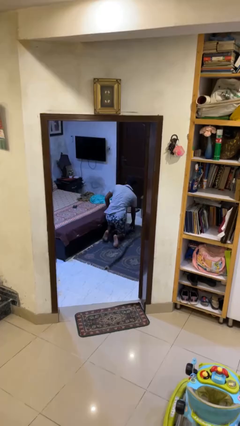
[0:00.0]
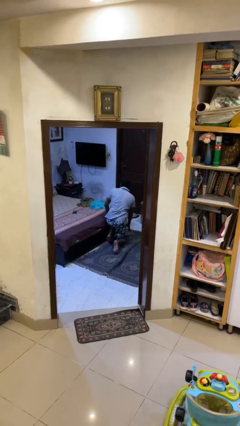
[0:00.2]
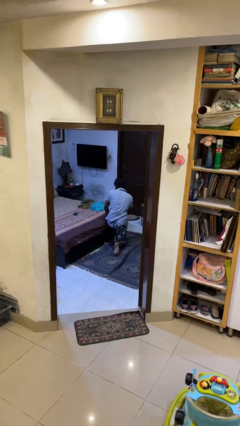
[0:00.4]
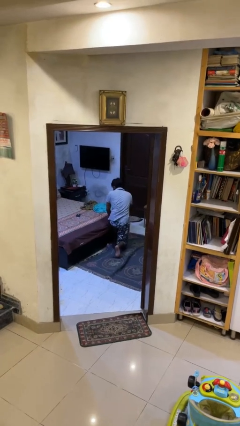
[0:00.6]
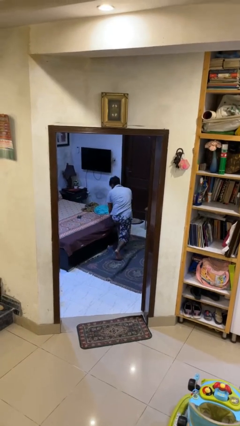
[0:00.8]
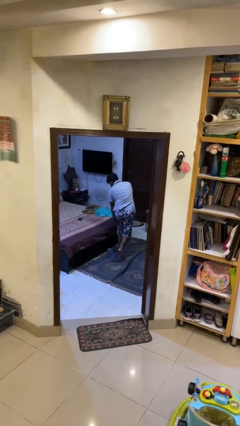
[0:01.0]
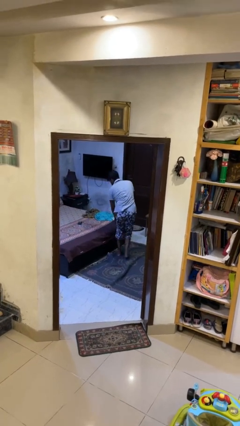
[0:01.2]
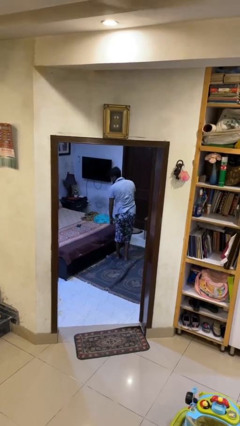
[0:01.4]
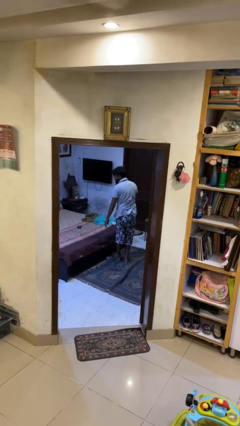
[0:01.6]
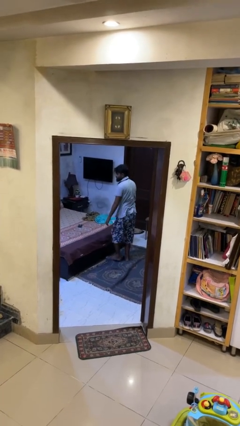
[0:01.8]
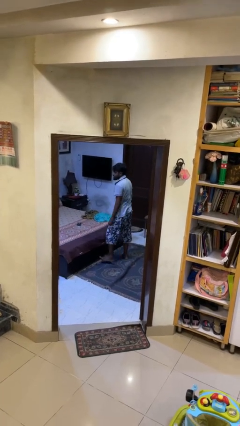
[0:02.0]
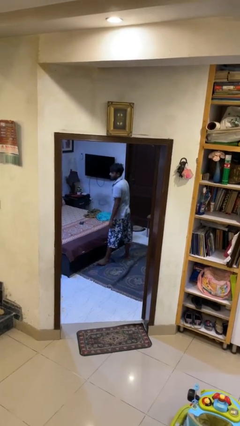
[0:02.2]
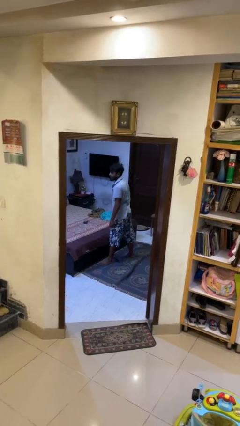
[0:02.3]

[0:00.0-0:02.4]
person stands up from floor

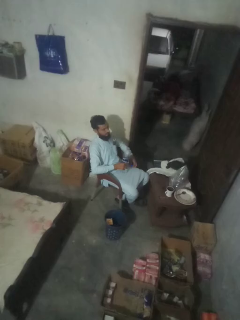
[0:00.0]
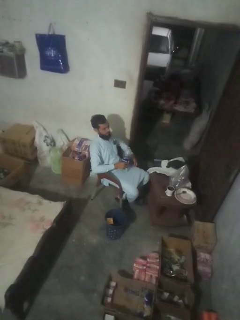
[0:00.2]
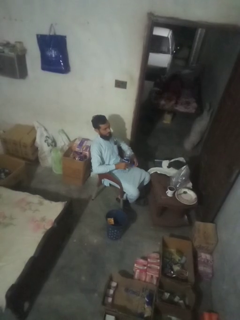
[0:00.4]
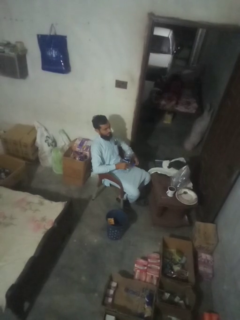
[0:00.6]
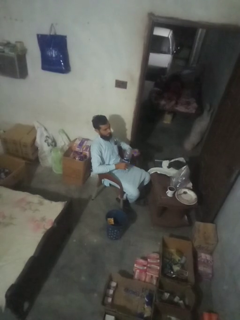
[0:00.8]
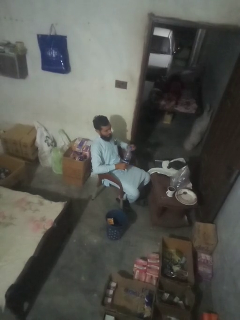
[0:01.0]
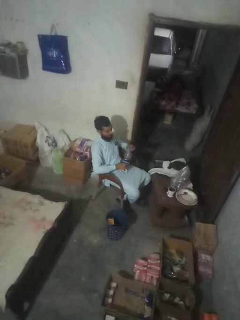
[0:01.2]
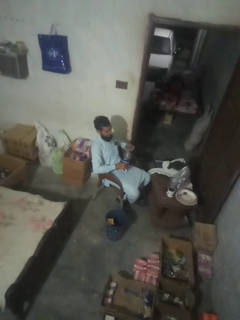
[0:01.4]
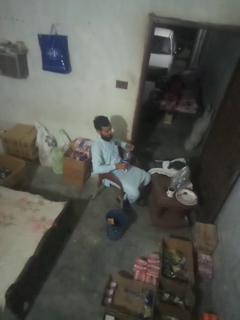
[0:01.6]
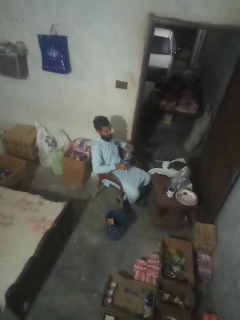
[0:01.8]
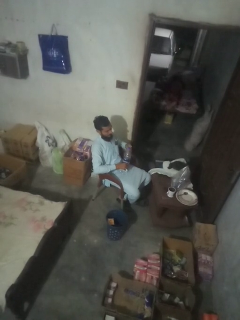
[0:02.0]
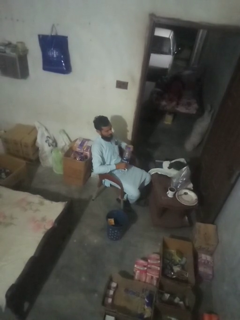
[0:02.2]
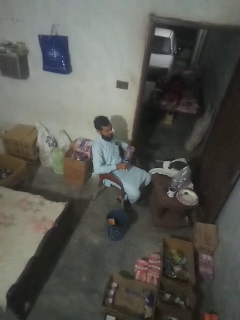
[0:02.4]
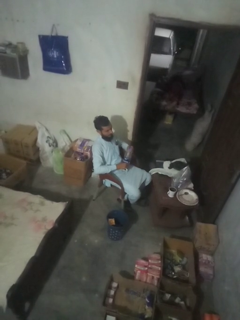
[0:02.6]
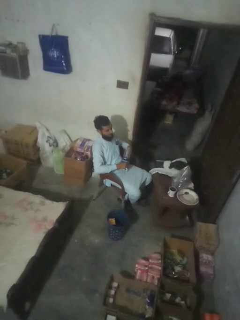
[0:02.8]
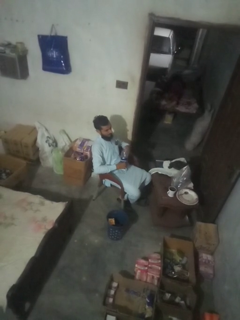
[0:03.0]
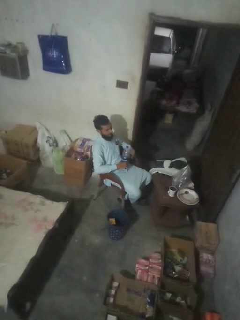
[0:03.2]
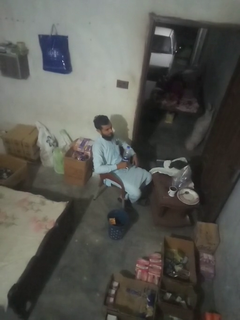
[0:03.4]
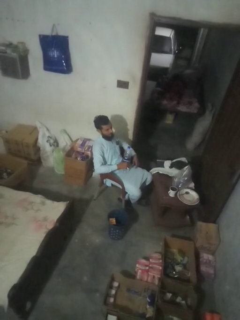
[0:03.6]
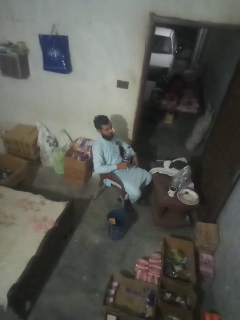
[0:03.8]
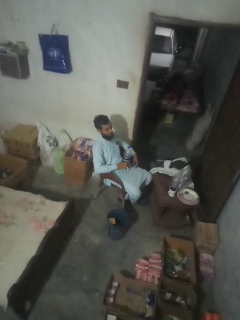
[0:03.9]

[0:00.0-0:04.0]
person screws lid to bottle

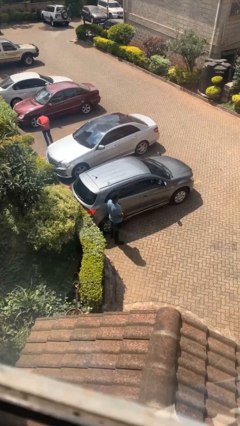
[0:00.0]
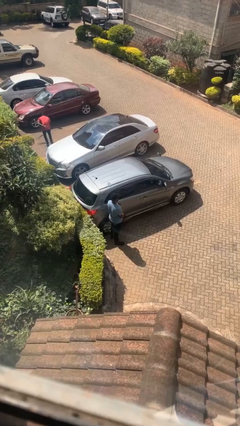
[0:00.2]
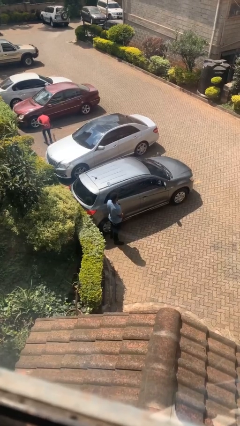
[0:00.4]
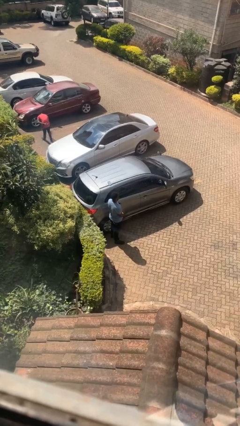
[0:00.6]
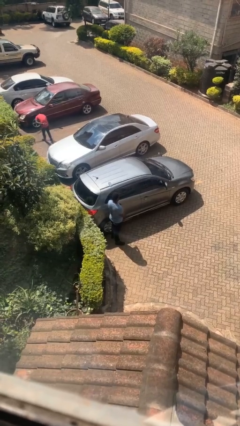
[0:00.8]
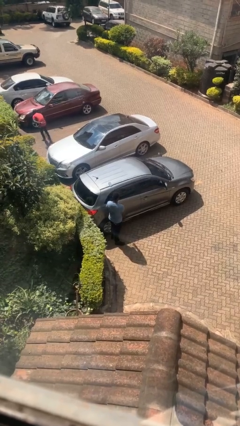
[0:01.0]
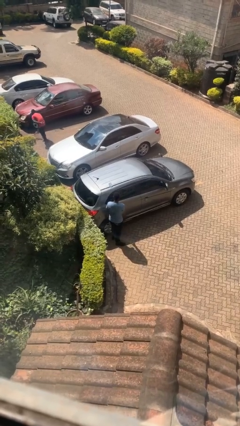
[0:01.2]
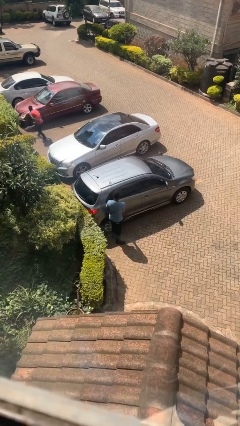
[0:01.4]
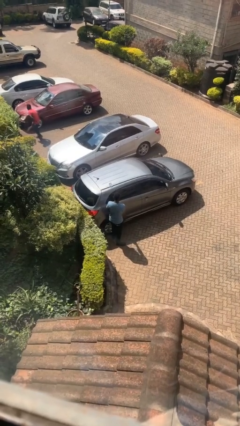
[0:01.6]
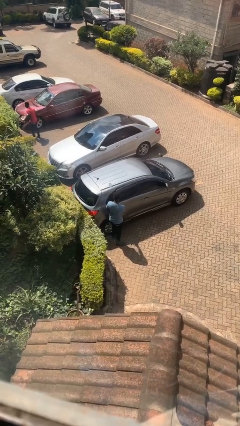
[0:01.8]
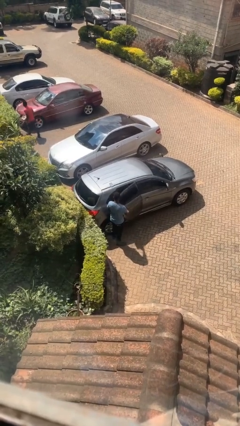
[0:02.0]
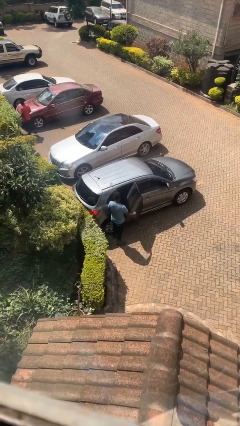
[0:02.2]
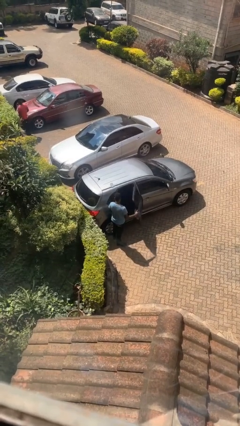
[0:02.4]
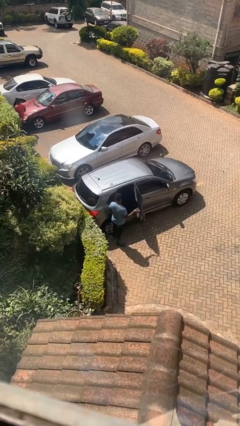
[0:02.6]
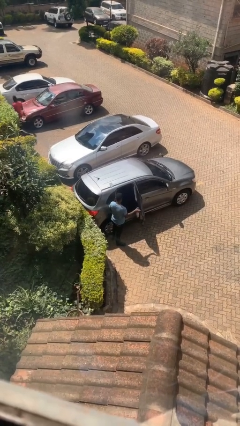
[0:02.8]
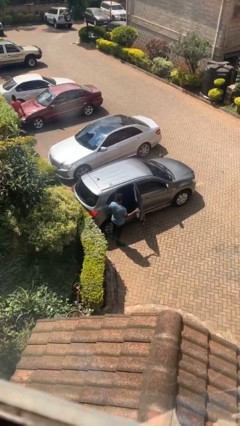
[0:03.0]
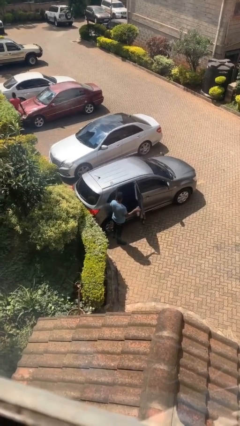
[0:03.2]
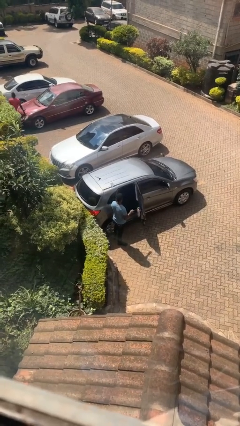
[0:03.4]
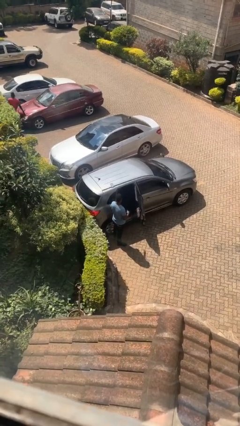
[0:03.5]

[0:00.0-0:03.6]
person opens car door

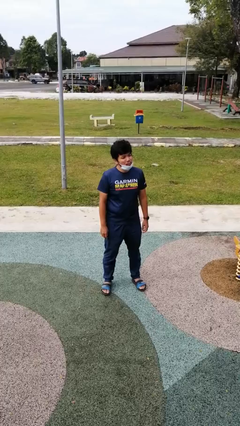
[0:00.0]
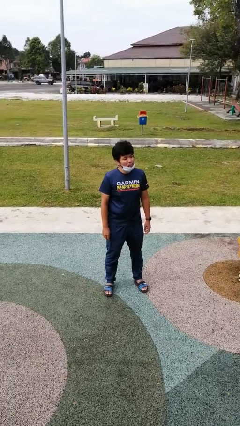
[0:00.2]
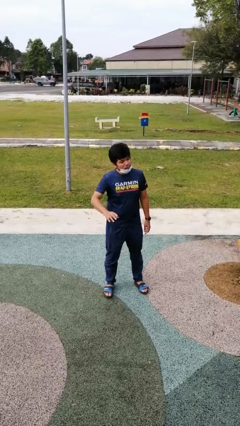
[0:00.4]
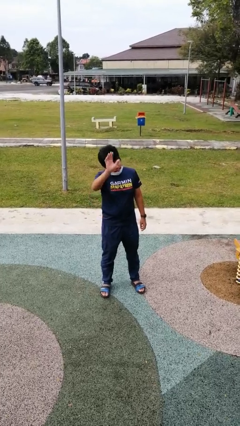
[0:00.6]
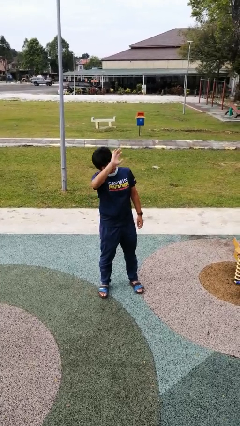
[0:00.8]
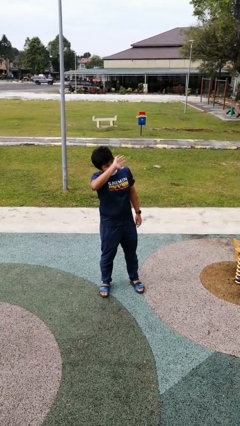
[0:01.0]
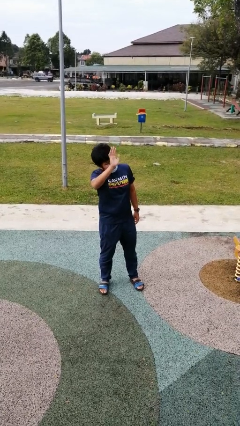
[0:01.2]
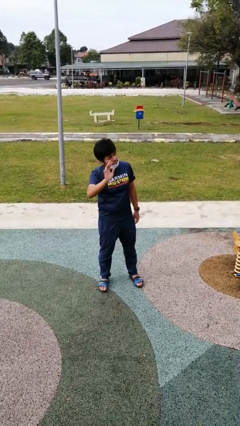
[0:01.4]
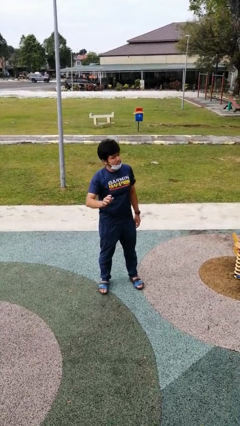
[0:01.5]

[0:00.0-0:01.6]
person waves at person

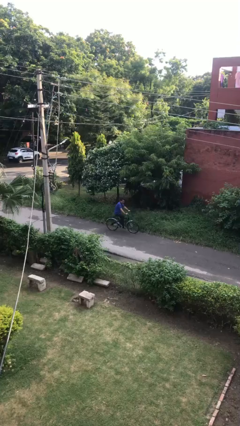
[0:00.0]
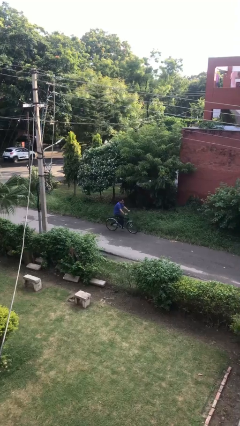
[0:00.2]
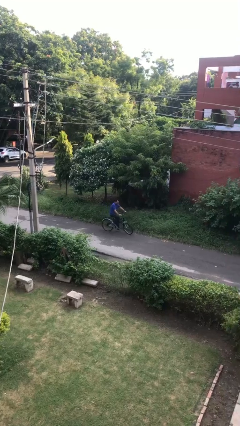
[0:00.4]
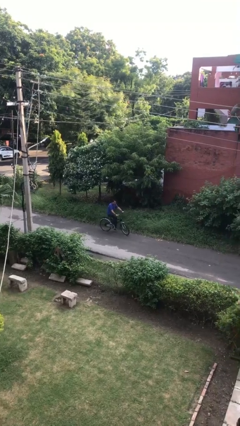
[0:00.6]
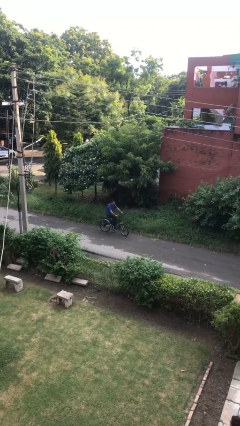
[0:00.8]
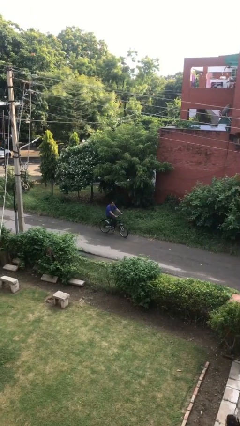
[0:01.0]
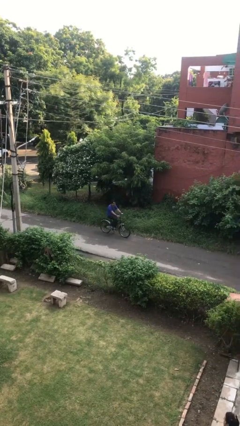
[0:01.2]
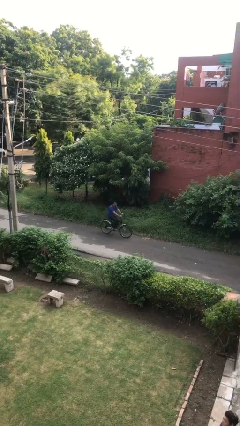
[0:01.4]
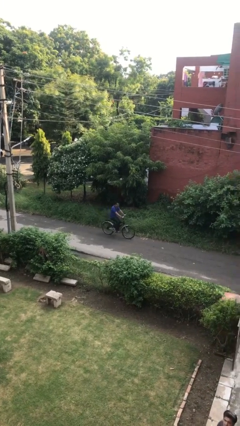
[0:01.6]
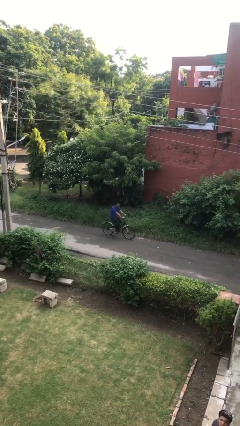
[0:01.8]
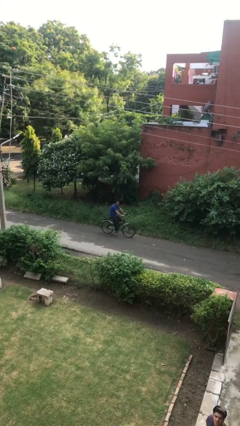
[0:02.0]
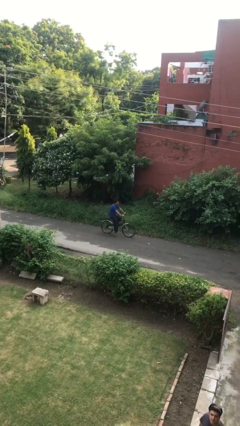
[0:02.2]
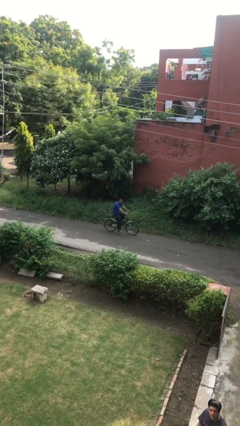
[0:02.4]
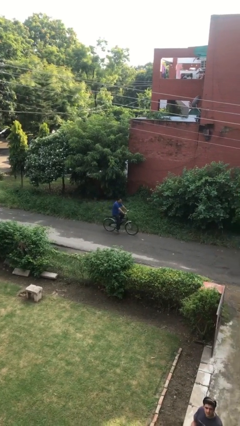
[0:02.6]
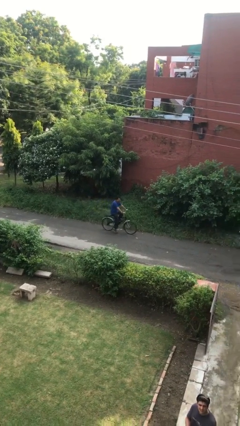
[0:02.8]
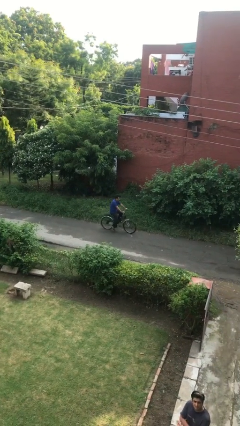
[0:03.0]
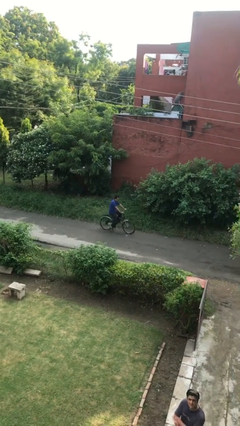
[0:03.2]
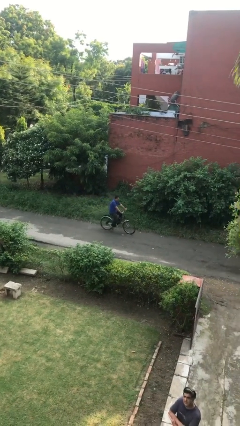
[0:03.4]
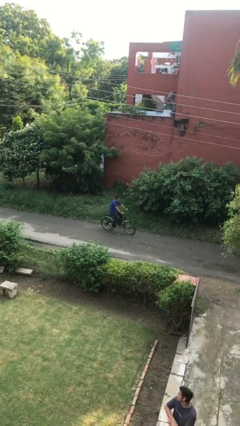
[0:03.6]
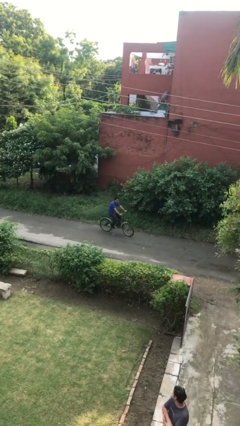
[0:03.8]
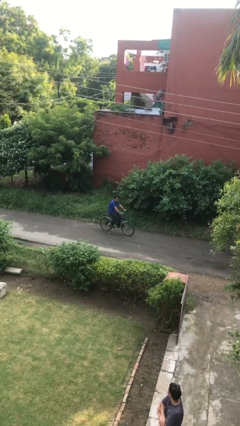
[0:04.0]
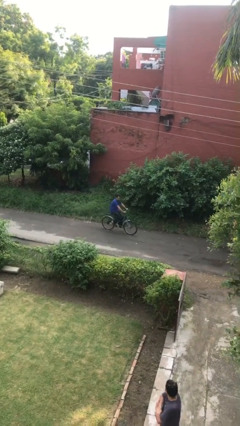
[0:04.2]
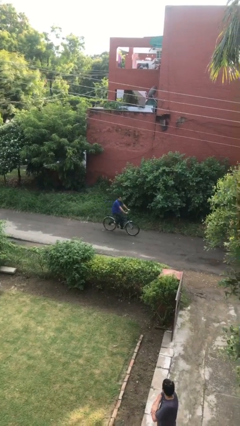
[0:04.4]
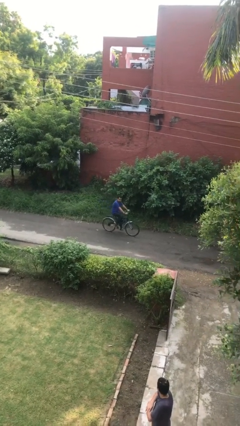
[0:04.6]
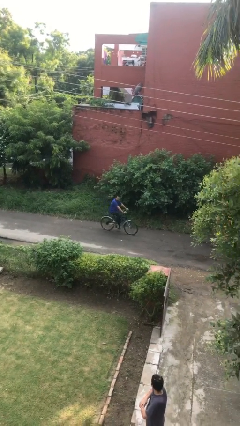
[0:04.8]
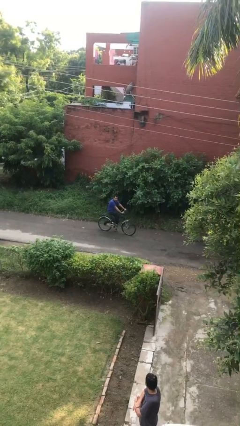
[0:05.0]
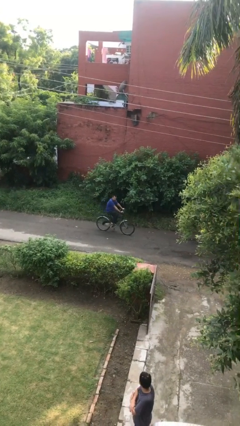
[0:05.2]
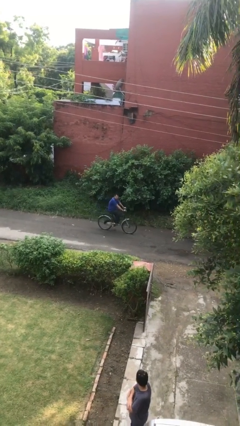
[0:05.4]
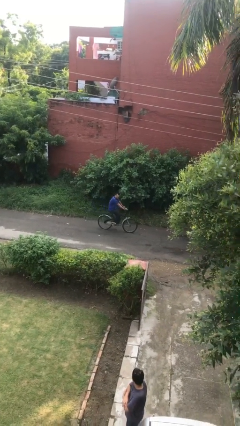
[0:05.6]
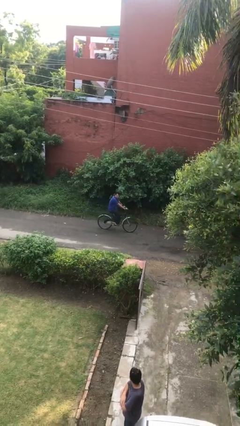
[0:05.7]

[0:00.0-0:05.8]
person rides bicycle

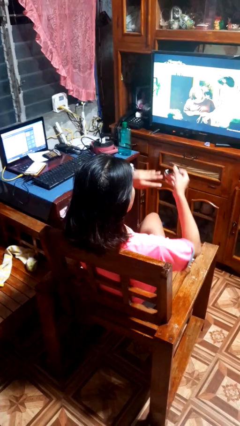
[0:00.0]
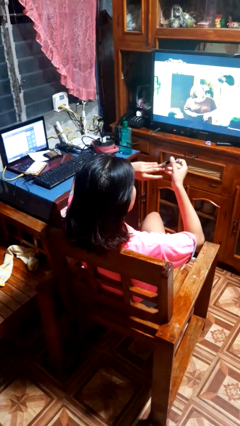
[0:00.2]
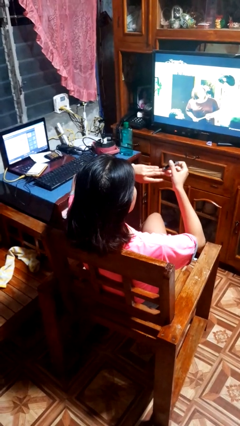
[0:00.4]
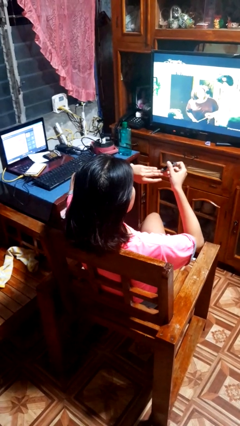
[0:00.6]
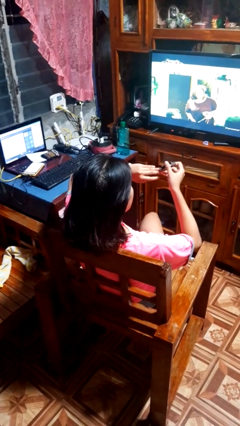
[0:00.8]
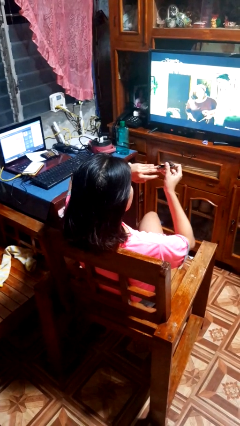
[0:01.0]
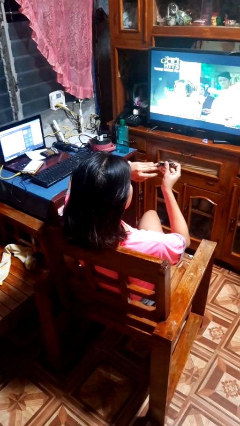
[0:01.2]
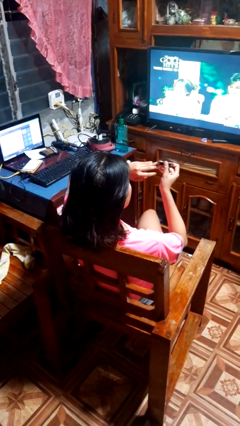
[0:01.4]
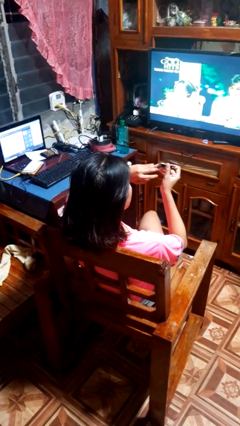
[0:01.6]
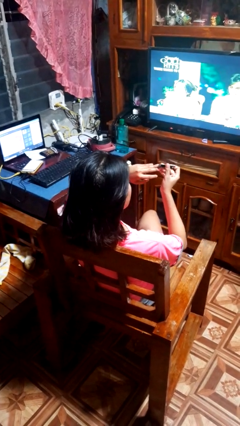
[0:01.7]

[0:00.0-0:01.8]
person clips fingernails
